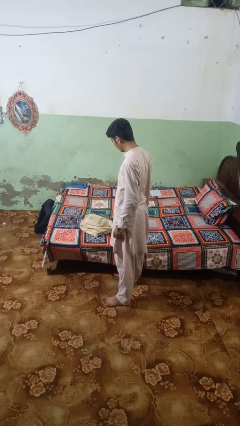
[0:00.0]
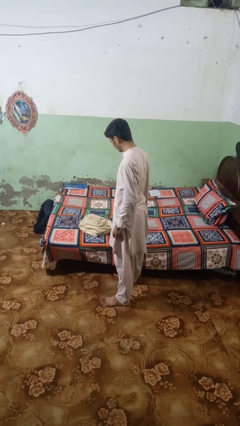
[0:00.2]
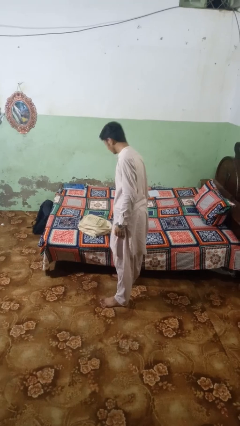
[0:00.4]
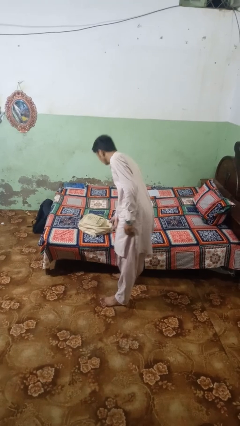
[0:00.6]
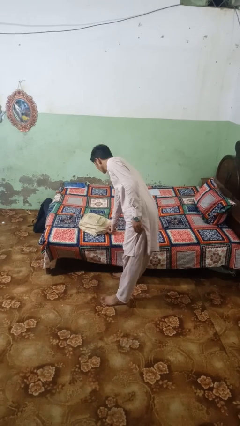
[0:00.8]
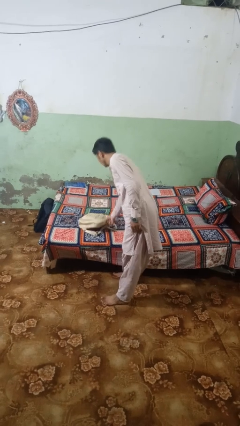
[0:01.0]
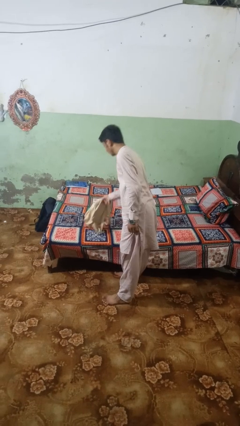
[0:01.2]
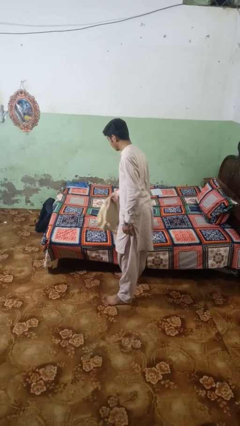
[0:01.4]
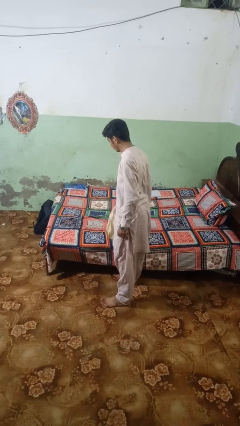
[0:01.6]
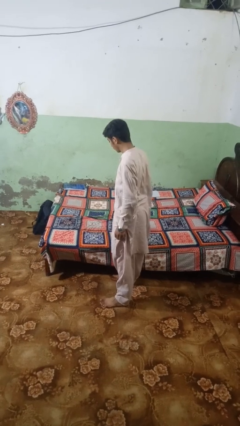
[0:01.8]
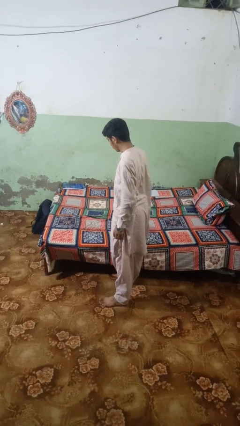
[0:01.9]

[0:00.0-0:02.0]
person picks up object from bed

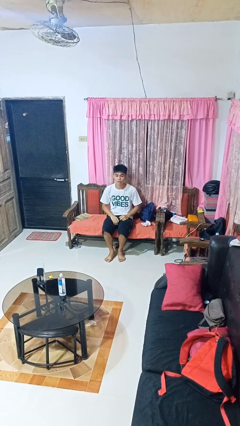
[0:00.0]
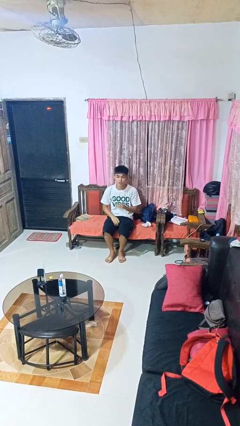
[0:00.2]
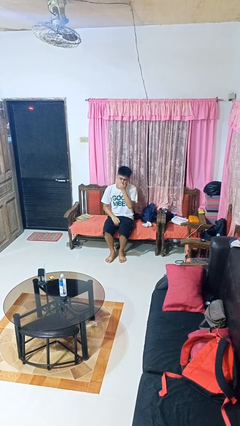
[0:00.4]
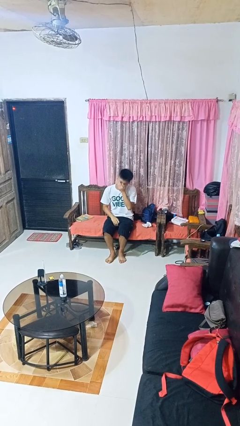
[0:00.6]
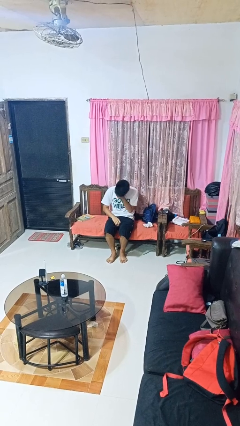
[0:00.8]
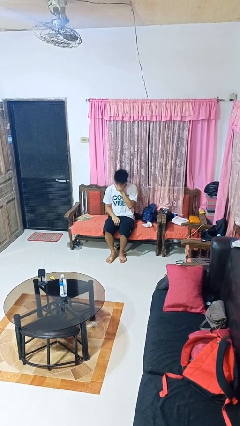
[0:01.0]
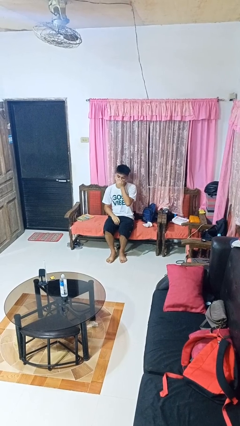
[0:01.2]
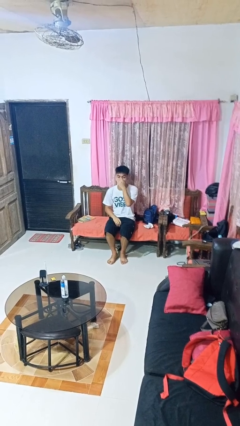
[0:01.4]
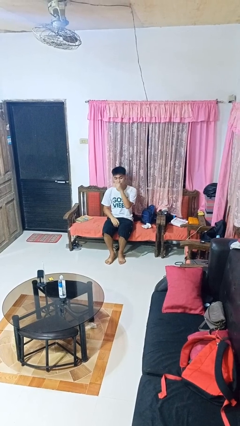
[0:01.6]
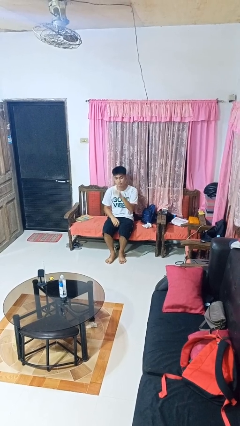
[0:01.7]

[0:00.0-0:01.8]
person sneezes into hand

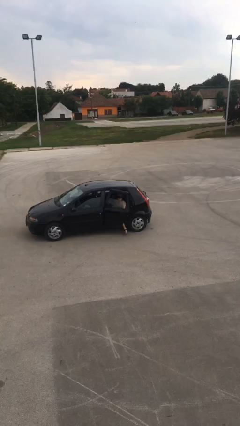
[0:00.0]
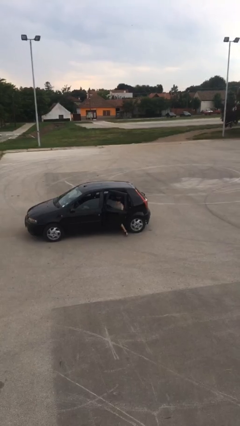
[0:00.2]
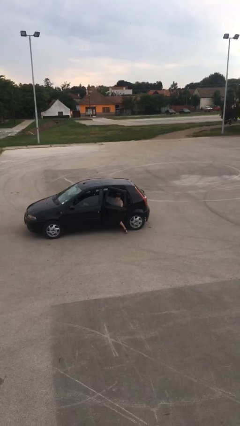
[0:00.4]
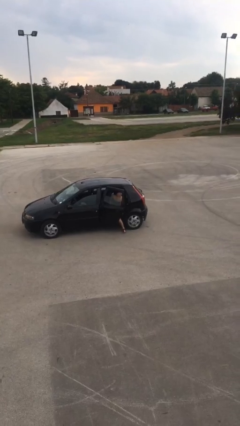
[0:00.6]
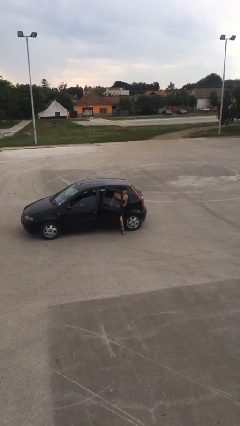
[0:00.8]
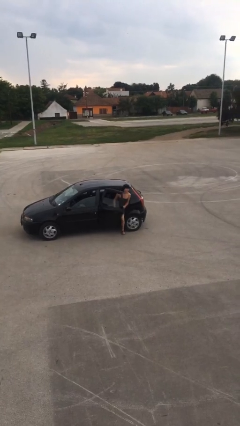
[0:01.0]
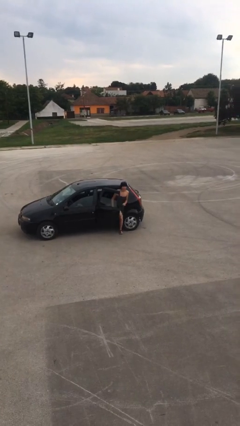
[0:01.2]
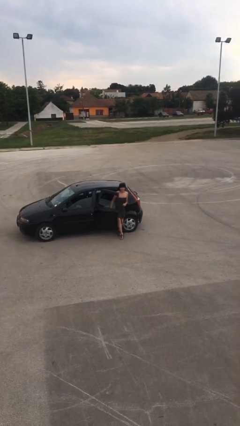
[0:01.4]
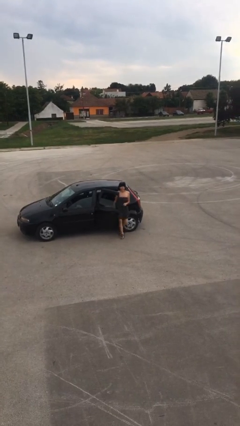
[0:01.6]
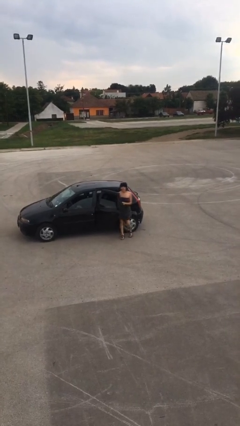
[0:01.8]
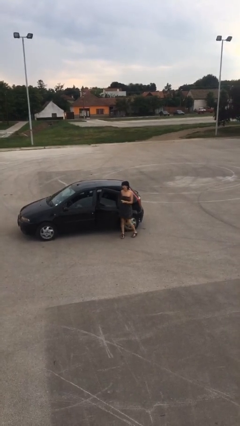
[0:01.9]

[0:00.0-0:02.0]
person exits car

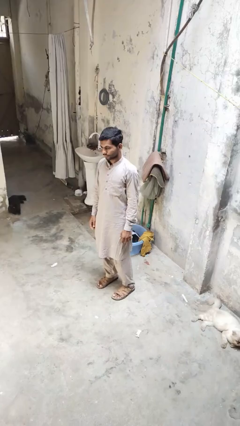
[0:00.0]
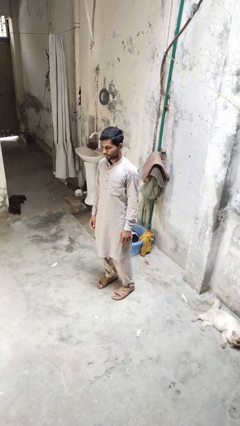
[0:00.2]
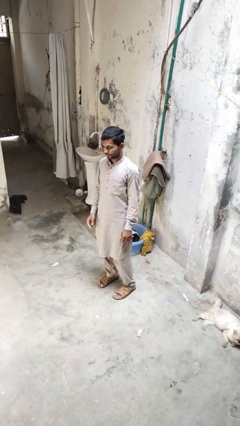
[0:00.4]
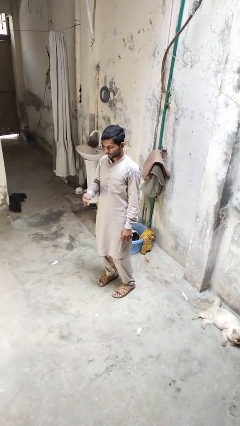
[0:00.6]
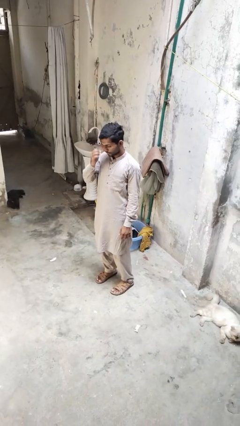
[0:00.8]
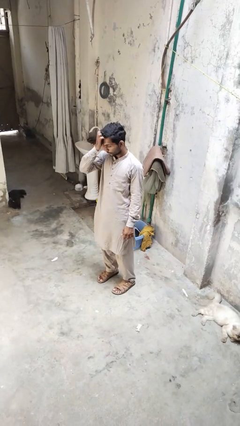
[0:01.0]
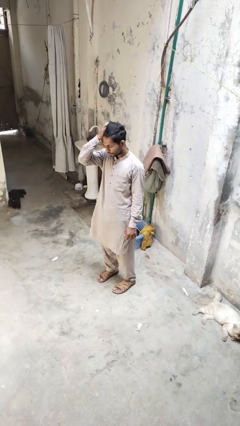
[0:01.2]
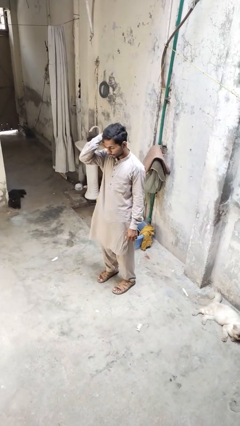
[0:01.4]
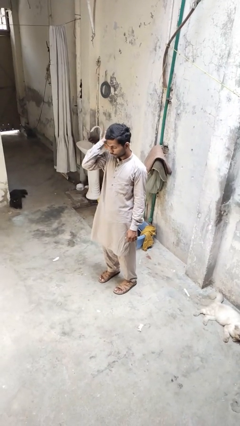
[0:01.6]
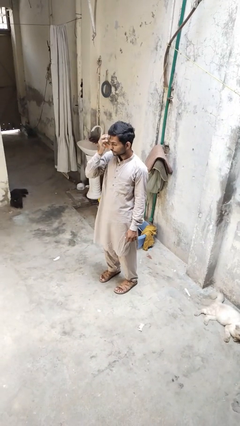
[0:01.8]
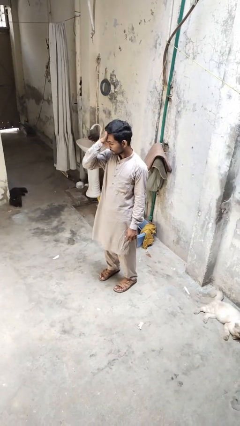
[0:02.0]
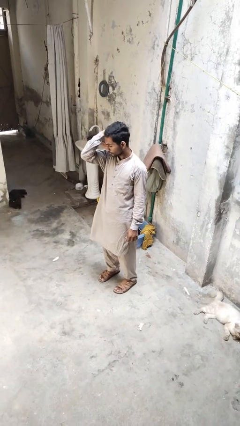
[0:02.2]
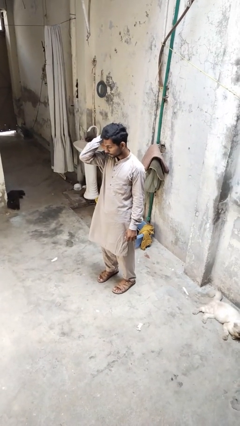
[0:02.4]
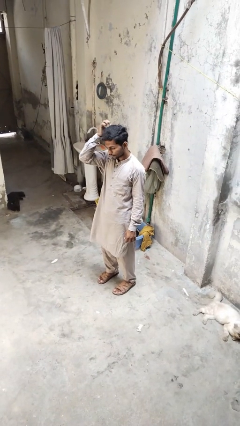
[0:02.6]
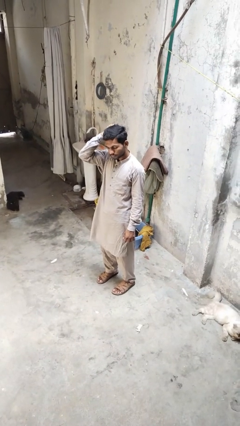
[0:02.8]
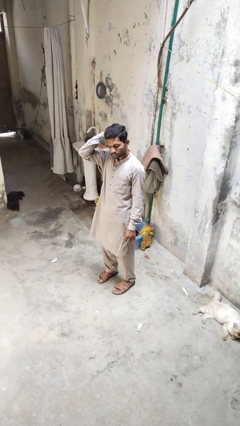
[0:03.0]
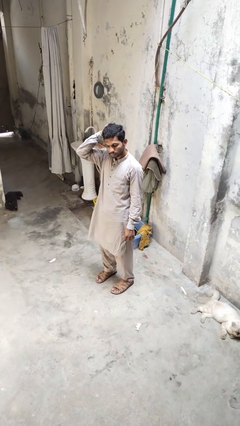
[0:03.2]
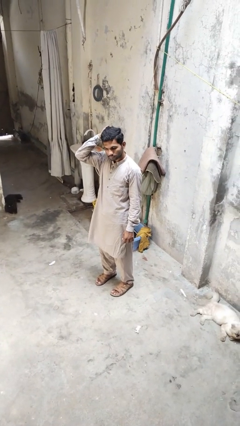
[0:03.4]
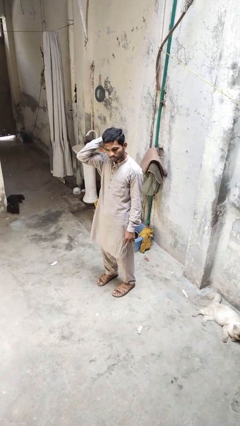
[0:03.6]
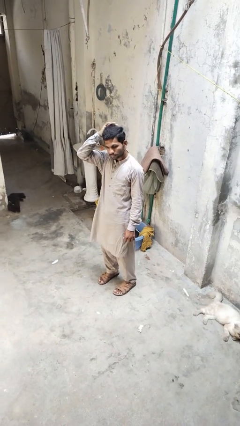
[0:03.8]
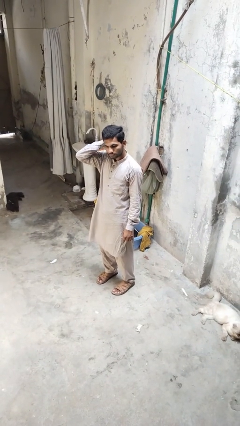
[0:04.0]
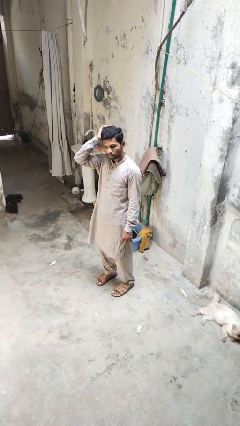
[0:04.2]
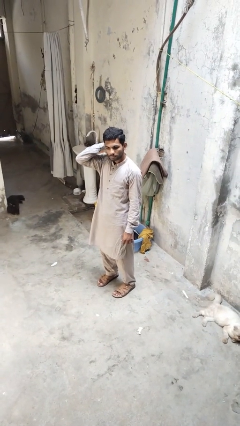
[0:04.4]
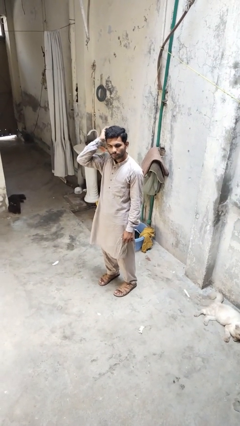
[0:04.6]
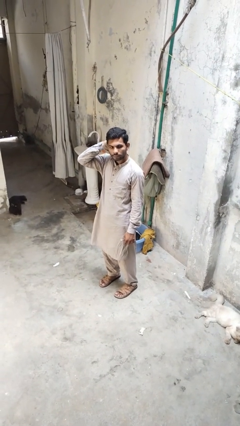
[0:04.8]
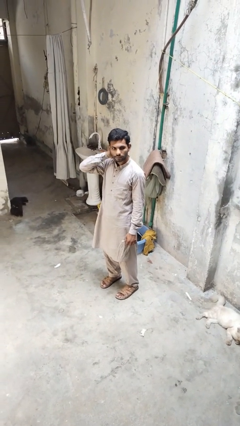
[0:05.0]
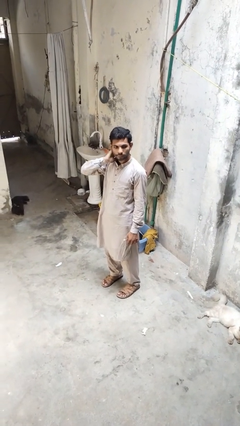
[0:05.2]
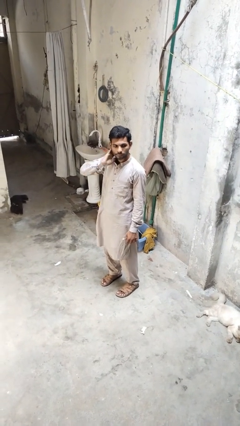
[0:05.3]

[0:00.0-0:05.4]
person scratches face

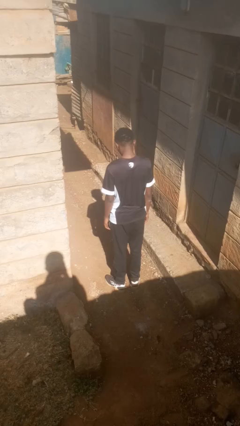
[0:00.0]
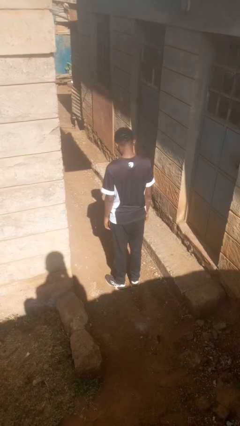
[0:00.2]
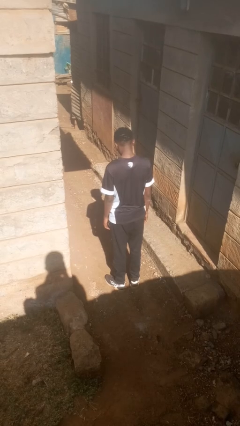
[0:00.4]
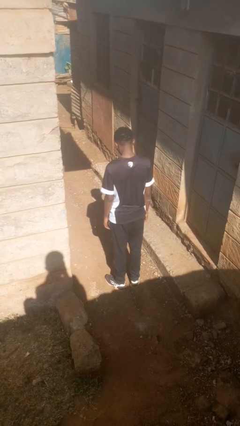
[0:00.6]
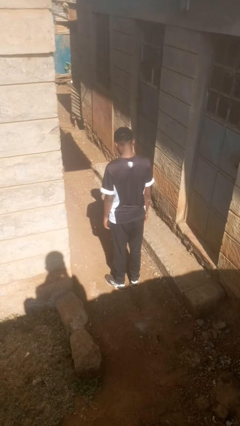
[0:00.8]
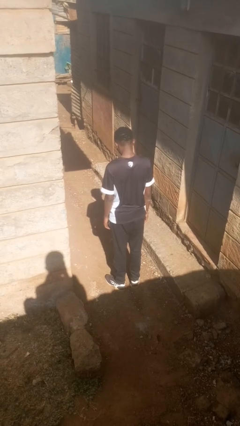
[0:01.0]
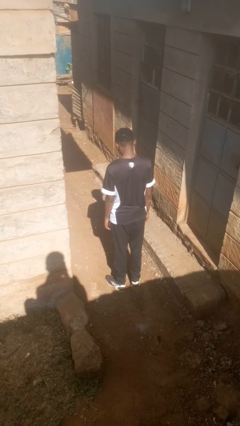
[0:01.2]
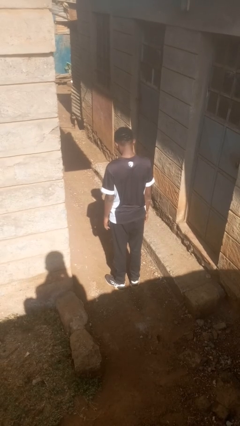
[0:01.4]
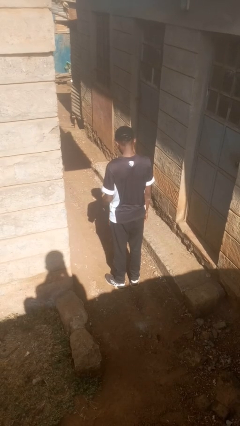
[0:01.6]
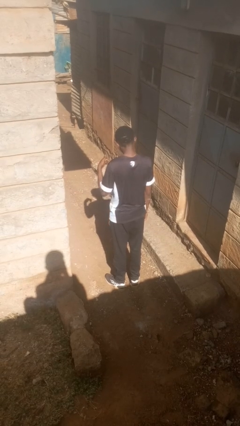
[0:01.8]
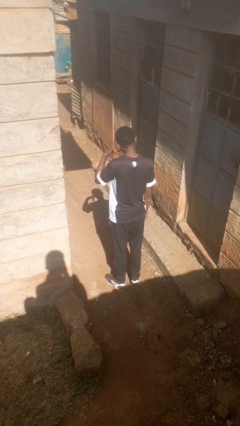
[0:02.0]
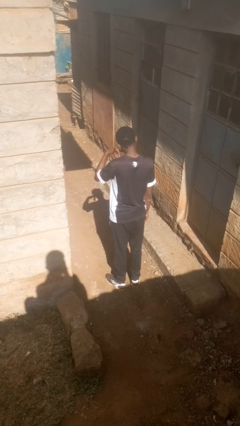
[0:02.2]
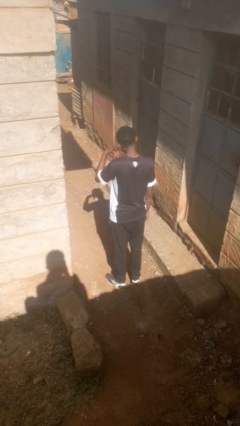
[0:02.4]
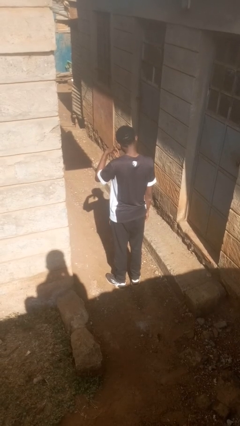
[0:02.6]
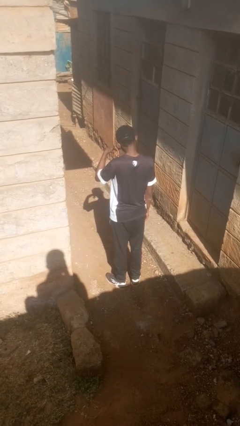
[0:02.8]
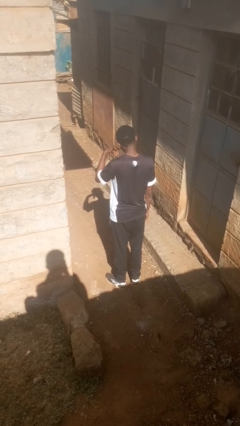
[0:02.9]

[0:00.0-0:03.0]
person gestures call me

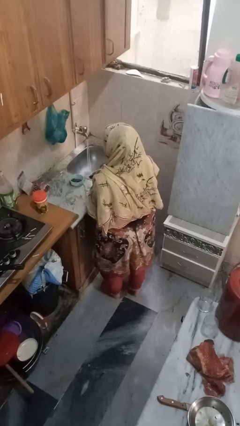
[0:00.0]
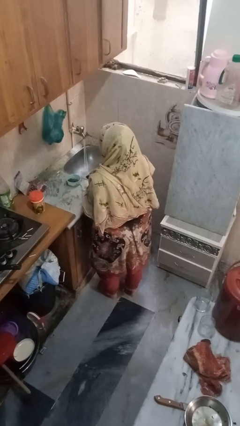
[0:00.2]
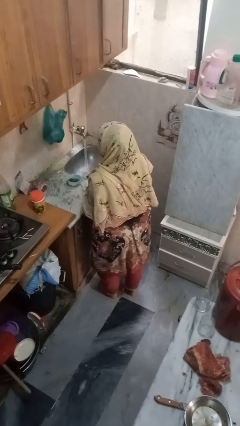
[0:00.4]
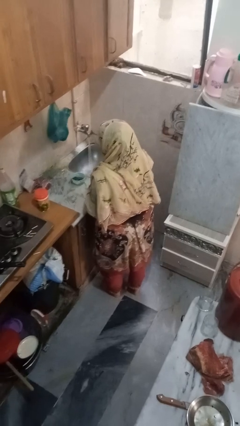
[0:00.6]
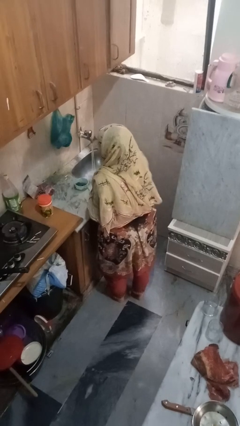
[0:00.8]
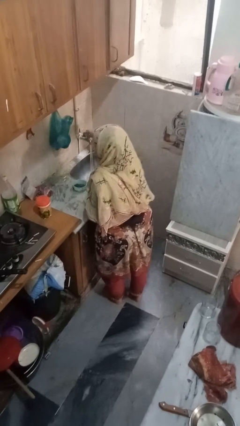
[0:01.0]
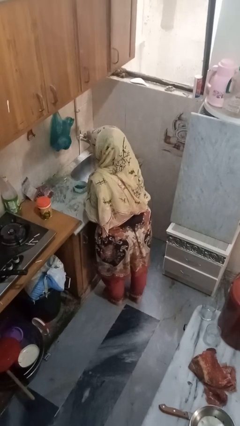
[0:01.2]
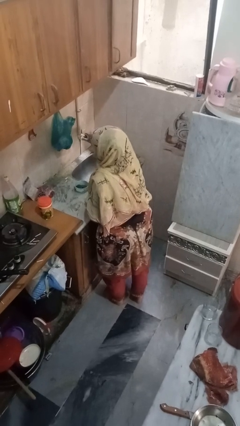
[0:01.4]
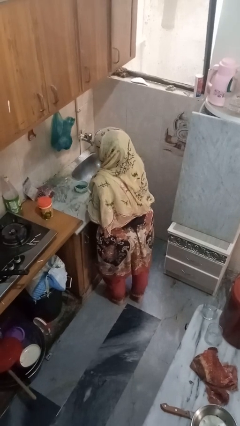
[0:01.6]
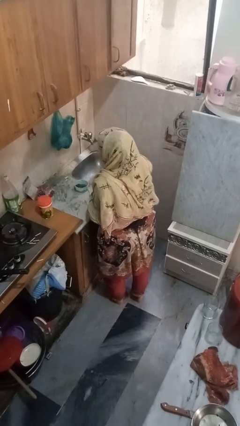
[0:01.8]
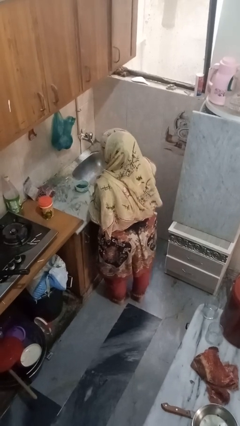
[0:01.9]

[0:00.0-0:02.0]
person turns off faucet

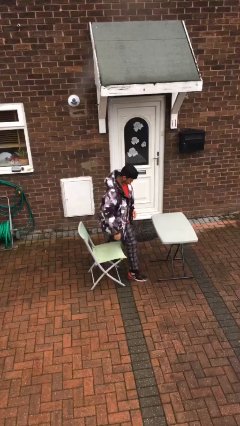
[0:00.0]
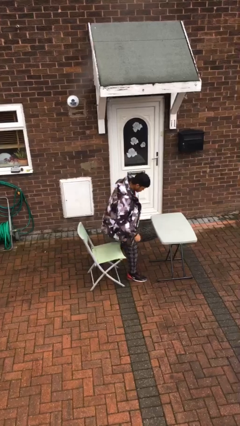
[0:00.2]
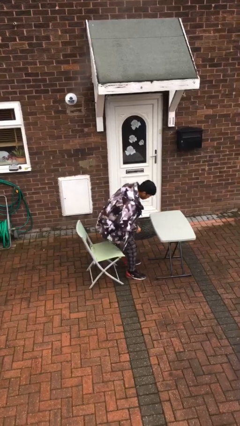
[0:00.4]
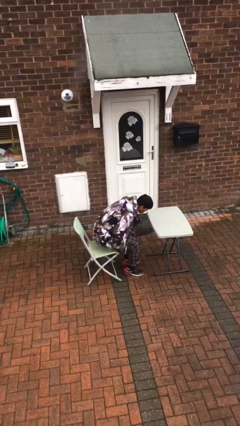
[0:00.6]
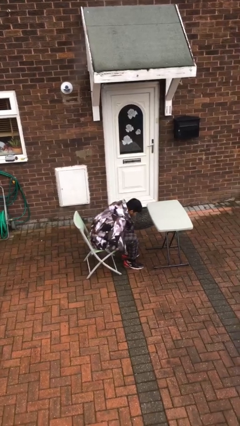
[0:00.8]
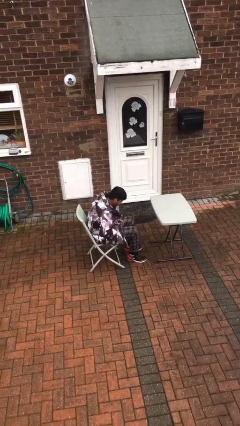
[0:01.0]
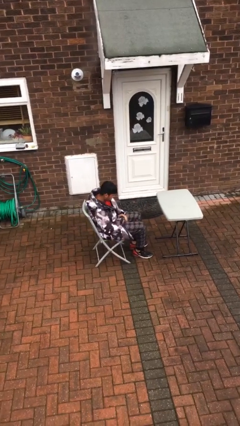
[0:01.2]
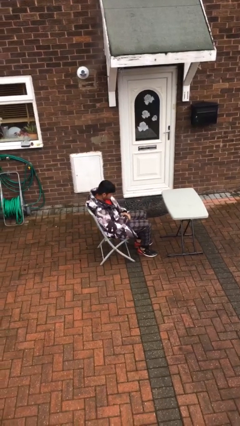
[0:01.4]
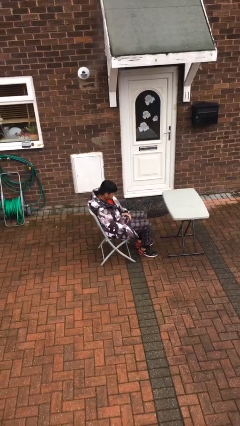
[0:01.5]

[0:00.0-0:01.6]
person sits down
